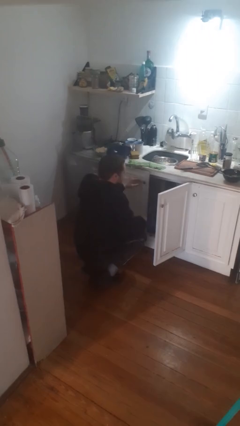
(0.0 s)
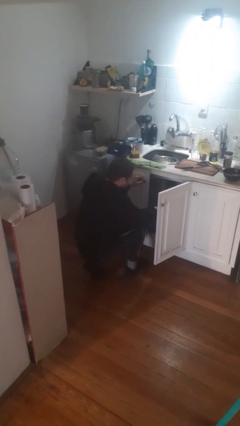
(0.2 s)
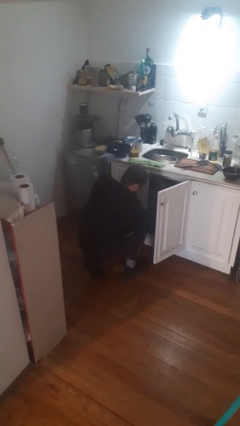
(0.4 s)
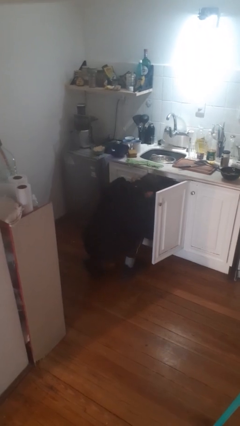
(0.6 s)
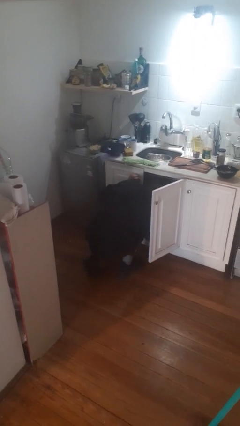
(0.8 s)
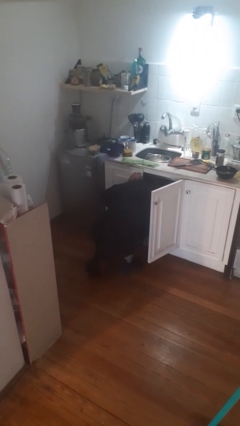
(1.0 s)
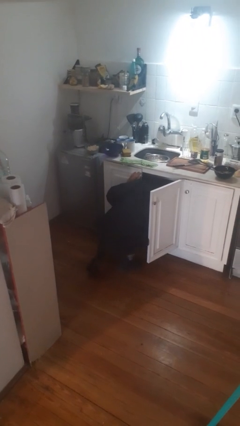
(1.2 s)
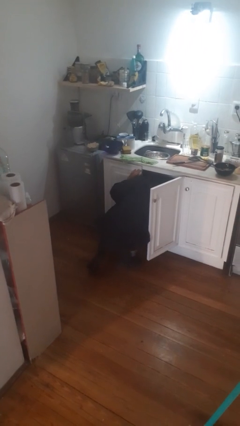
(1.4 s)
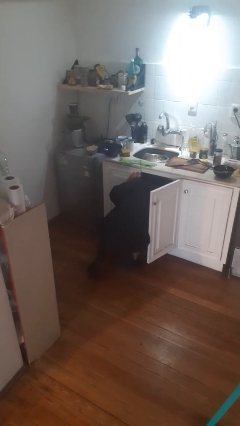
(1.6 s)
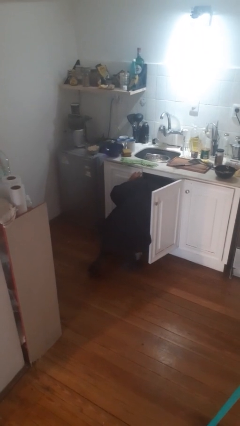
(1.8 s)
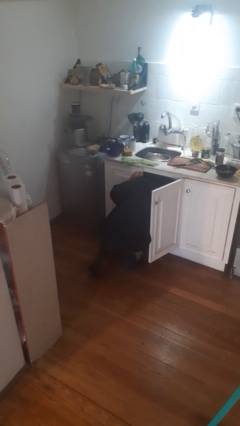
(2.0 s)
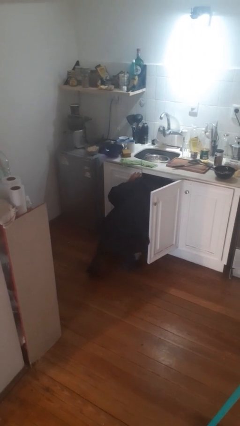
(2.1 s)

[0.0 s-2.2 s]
person searches in cabinet

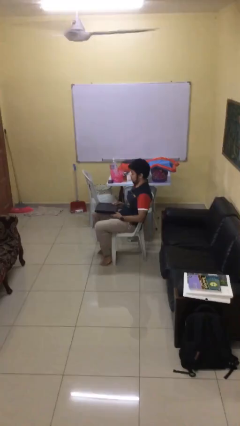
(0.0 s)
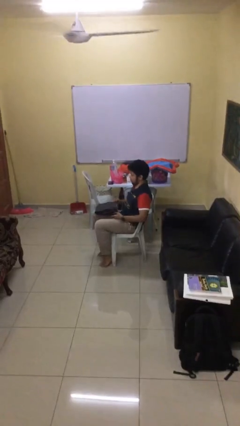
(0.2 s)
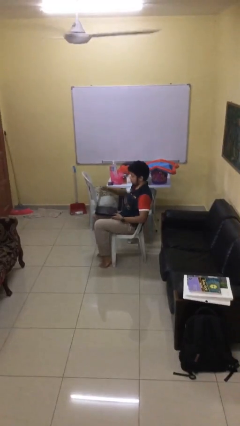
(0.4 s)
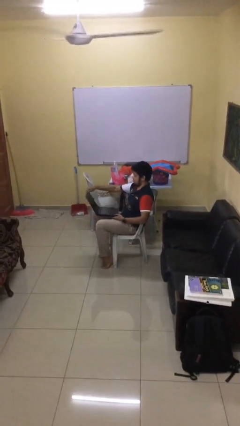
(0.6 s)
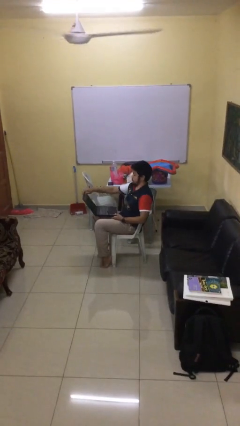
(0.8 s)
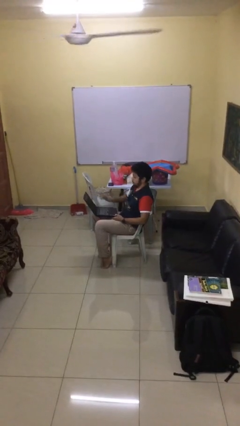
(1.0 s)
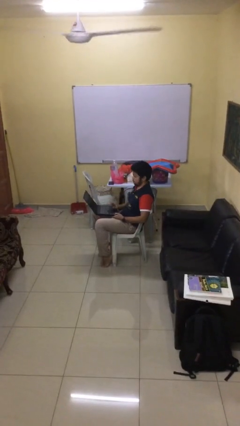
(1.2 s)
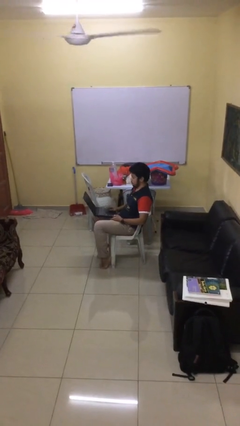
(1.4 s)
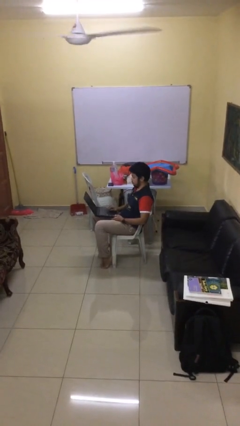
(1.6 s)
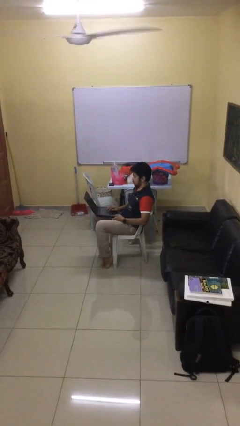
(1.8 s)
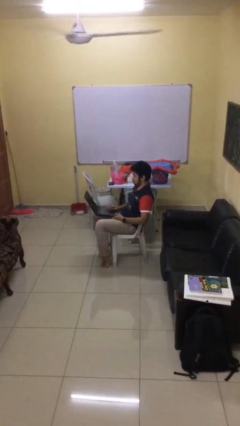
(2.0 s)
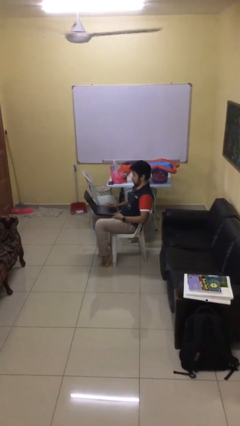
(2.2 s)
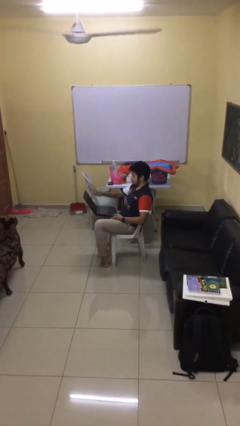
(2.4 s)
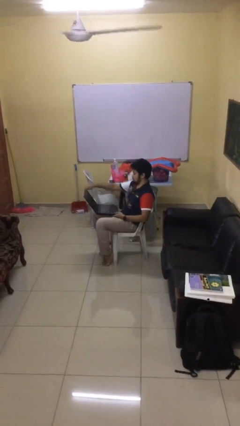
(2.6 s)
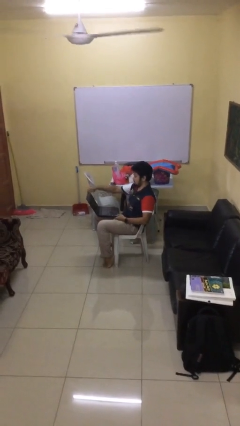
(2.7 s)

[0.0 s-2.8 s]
person opens laptop

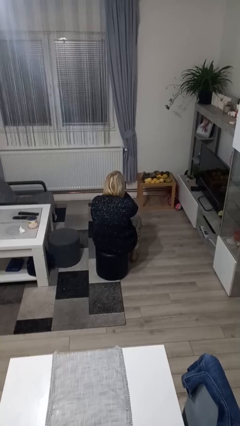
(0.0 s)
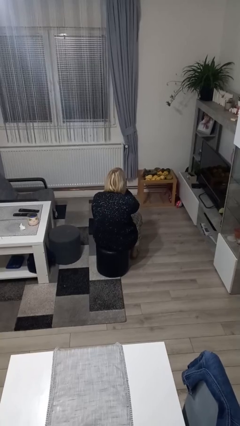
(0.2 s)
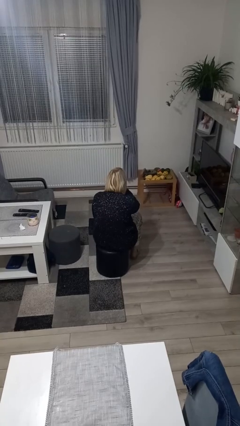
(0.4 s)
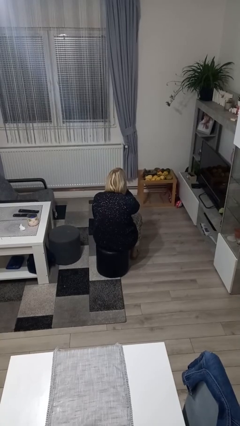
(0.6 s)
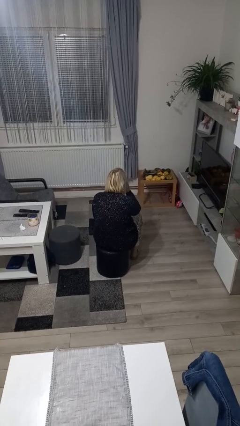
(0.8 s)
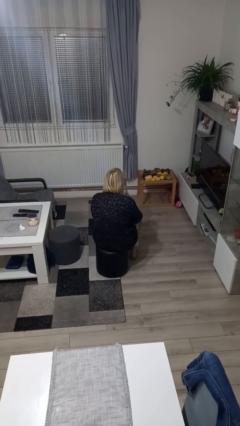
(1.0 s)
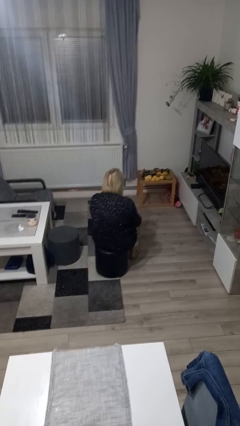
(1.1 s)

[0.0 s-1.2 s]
person gestures be quiet

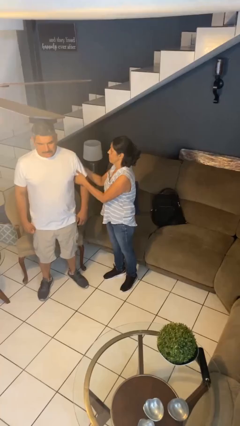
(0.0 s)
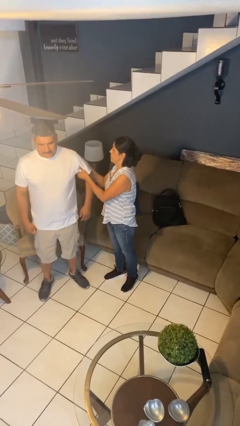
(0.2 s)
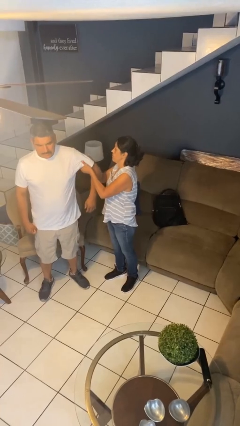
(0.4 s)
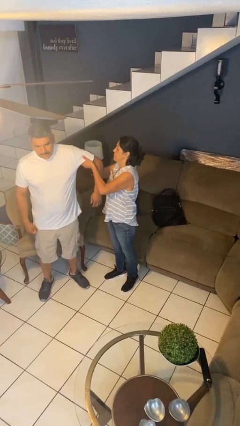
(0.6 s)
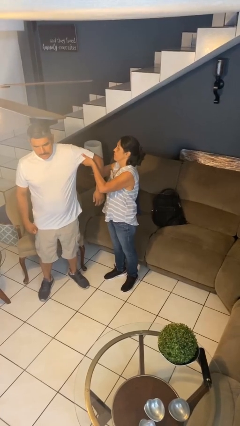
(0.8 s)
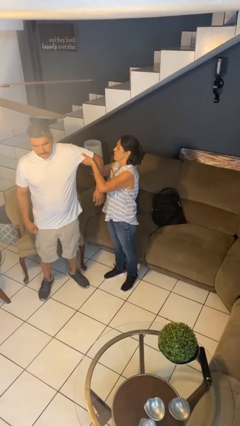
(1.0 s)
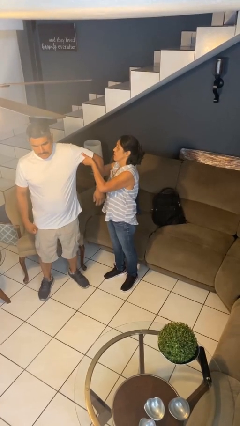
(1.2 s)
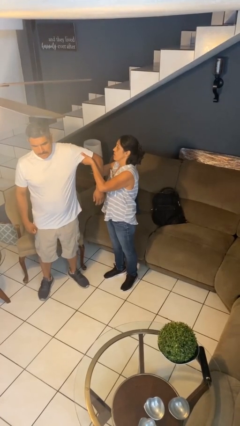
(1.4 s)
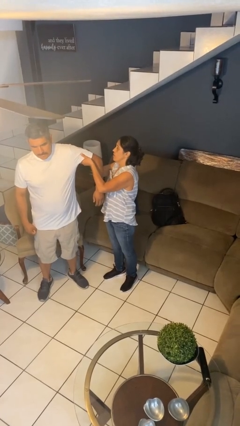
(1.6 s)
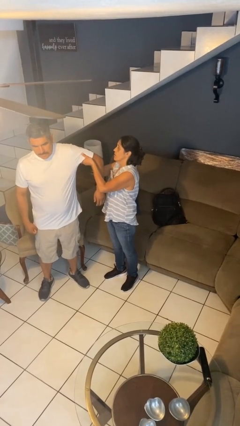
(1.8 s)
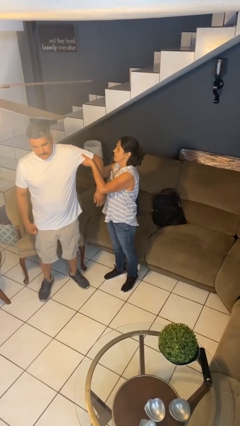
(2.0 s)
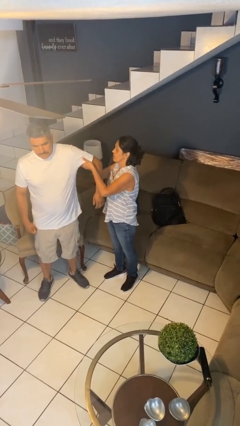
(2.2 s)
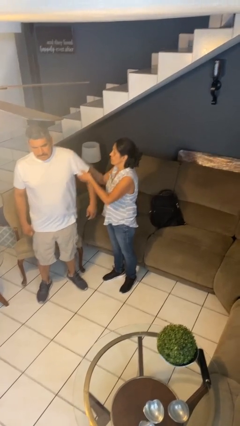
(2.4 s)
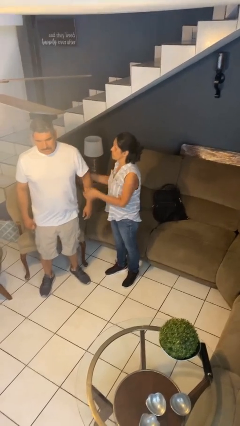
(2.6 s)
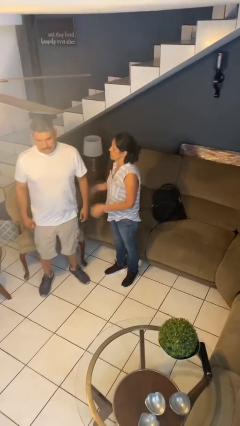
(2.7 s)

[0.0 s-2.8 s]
person grabs person by bicep

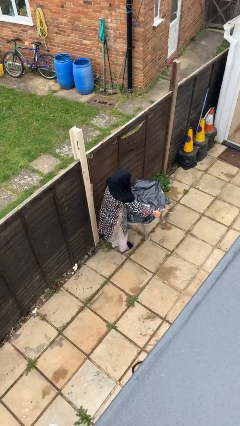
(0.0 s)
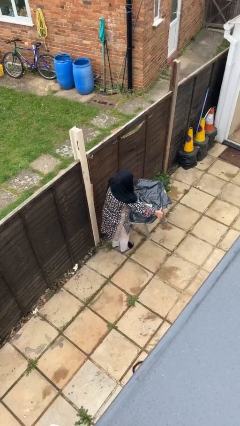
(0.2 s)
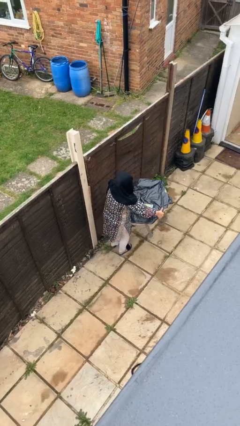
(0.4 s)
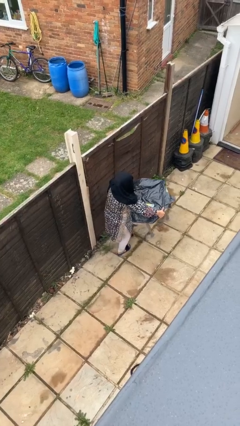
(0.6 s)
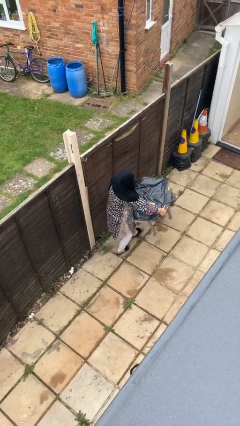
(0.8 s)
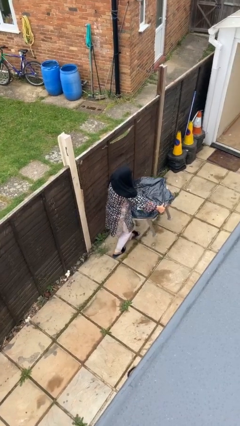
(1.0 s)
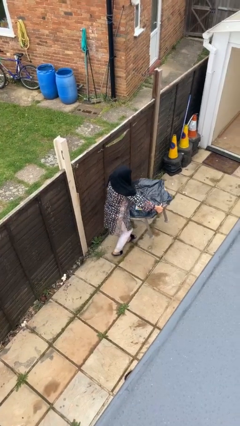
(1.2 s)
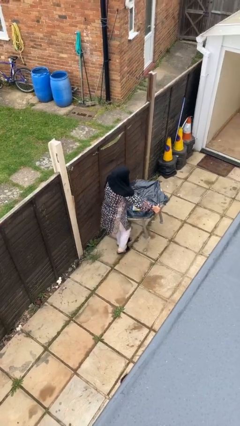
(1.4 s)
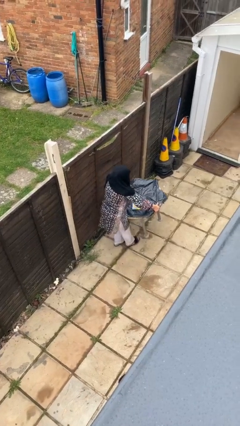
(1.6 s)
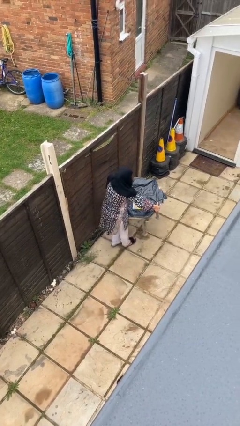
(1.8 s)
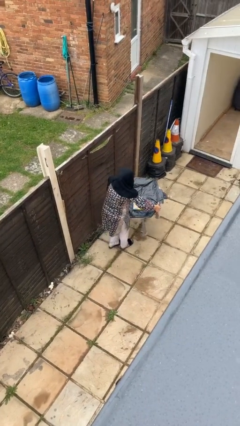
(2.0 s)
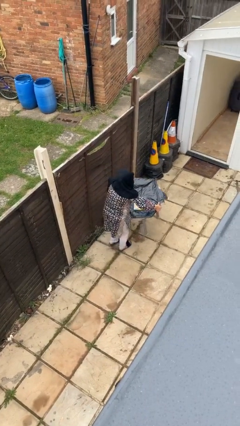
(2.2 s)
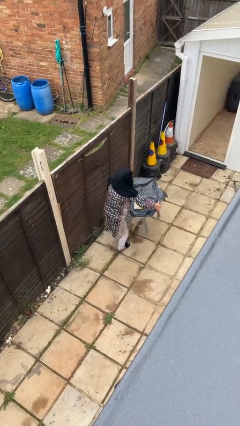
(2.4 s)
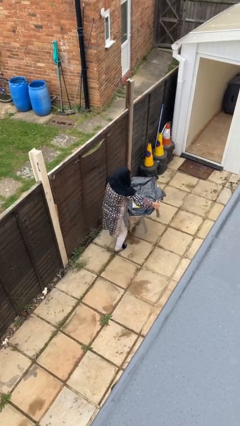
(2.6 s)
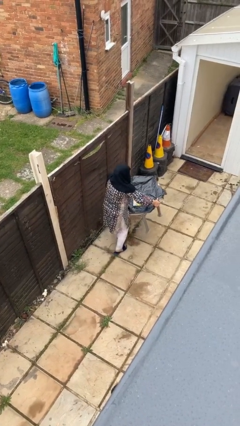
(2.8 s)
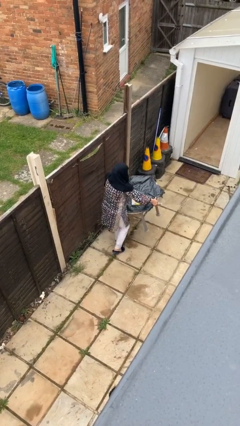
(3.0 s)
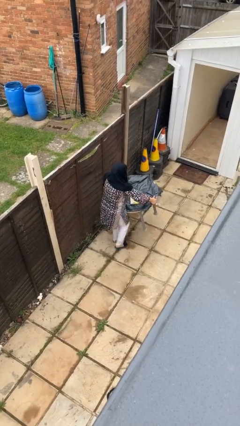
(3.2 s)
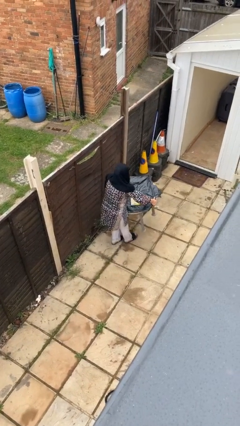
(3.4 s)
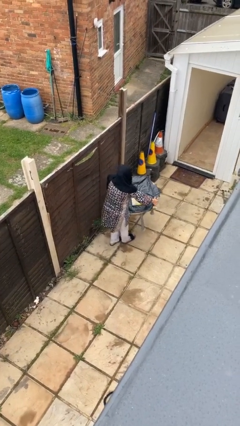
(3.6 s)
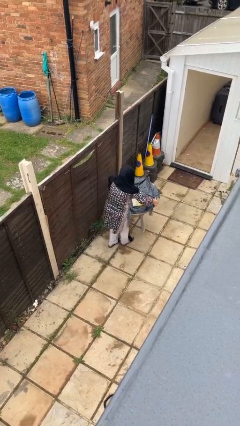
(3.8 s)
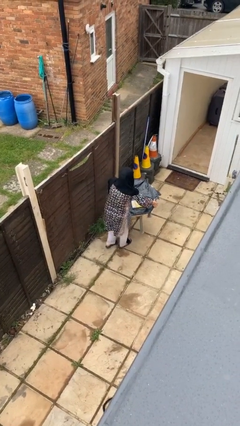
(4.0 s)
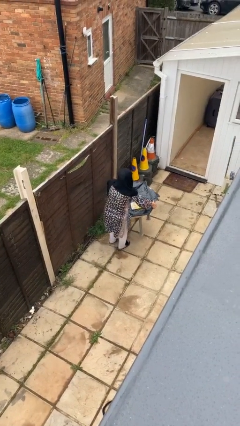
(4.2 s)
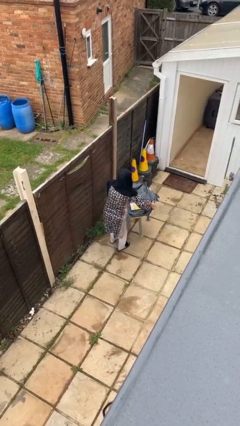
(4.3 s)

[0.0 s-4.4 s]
person carries heavy object

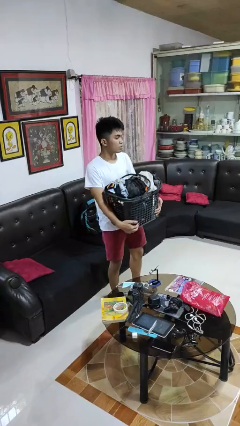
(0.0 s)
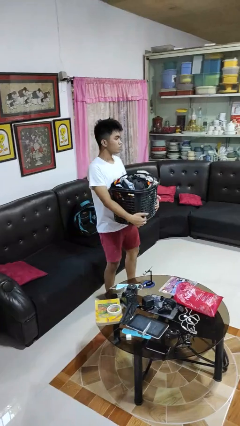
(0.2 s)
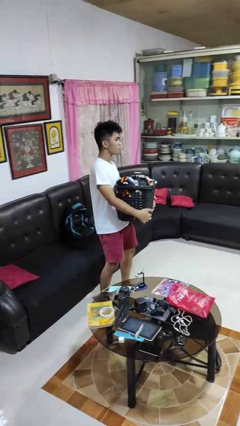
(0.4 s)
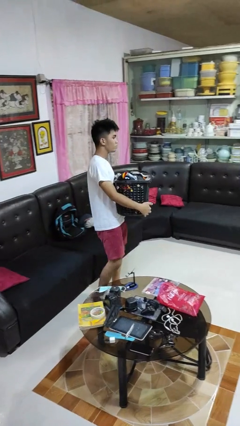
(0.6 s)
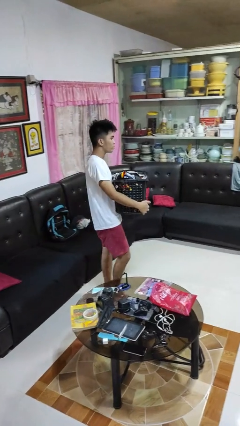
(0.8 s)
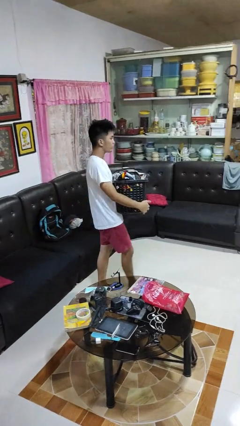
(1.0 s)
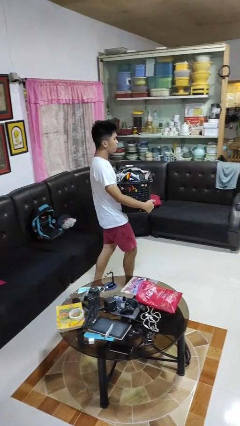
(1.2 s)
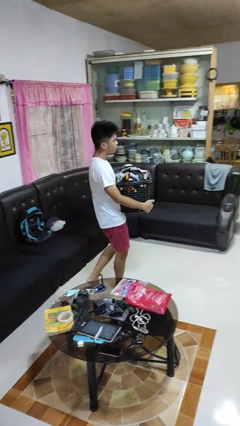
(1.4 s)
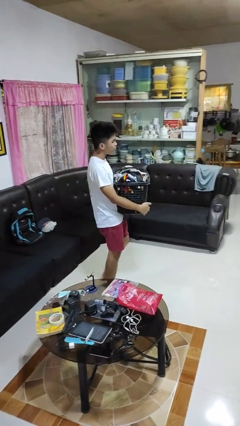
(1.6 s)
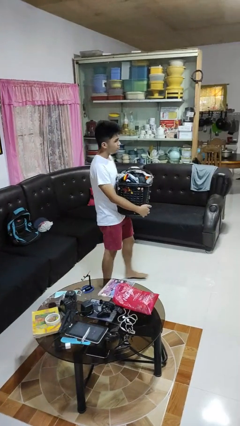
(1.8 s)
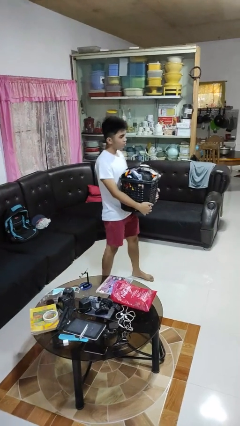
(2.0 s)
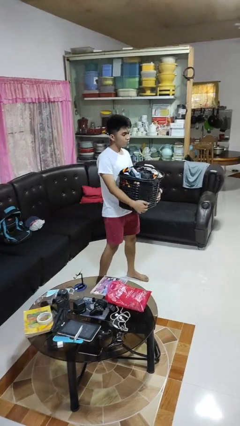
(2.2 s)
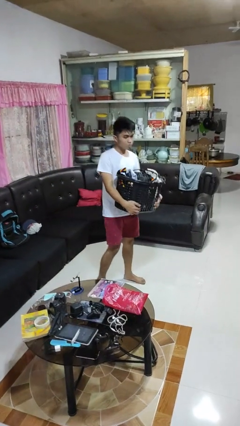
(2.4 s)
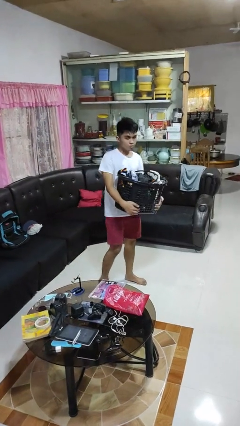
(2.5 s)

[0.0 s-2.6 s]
person carries laundry basket

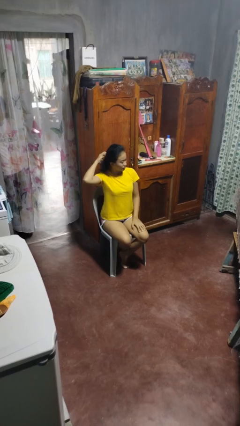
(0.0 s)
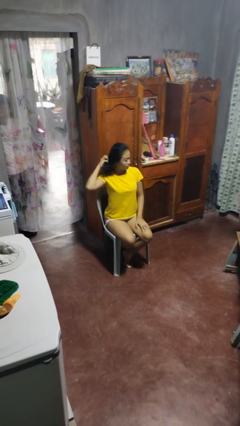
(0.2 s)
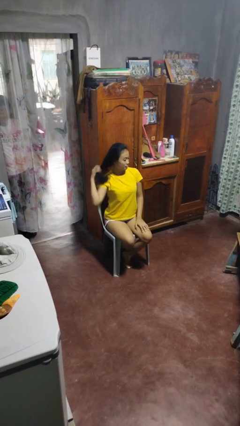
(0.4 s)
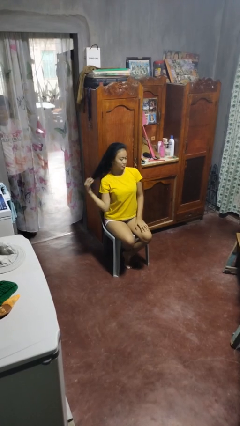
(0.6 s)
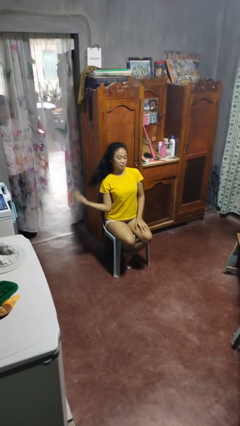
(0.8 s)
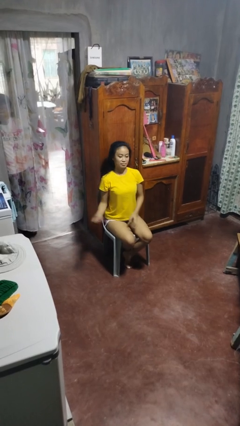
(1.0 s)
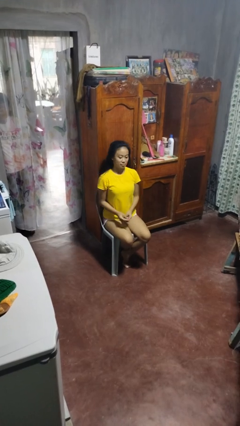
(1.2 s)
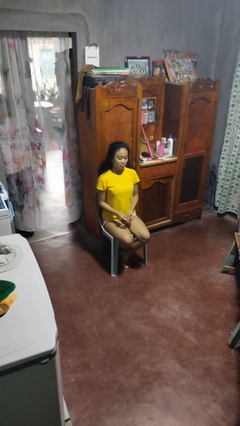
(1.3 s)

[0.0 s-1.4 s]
person takes off hairtie
